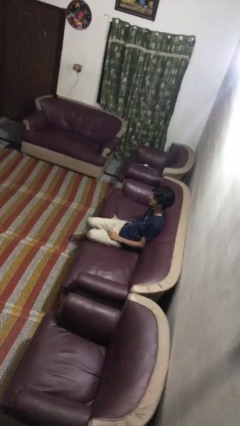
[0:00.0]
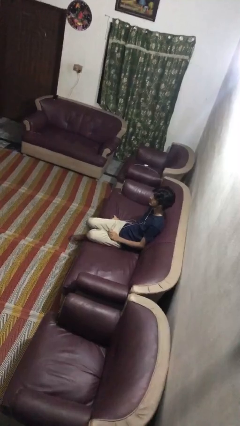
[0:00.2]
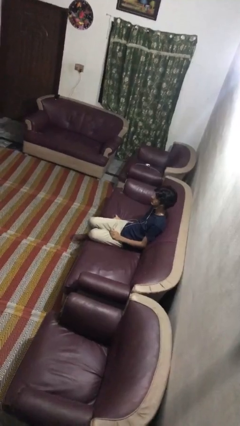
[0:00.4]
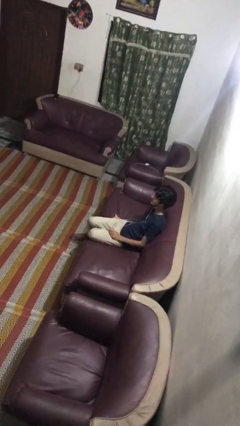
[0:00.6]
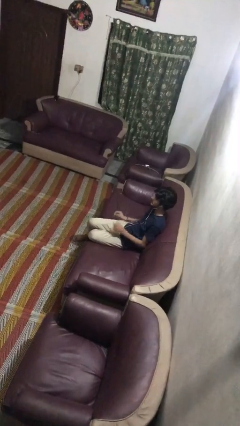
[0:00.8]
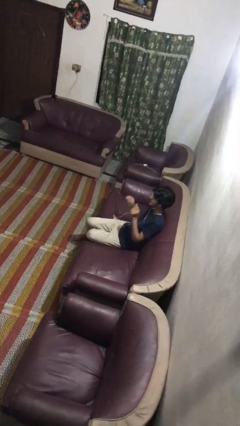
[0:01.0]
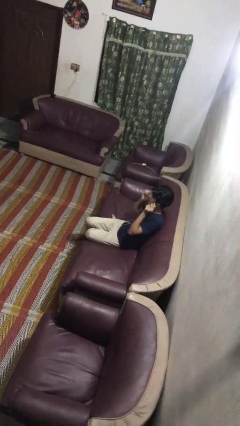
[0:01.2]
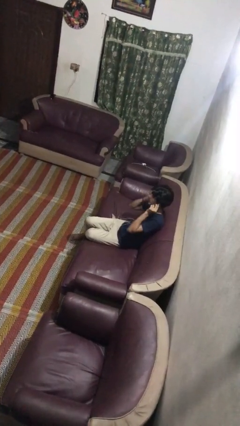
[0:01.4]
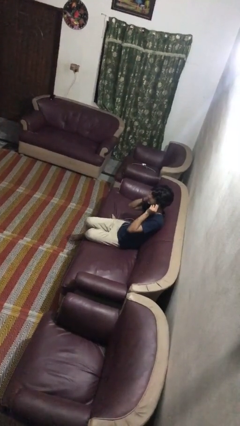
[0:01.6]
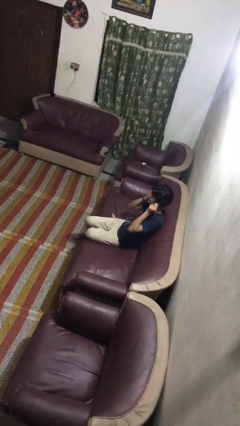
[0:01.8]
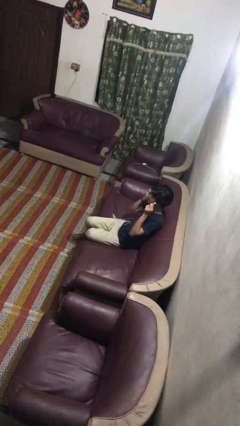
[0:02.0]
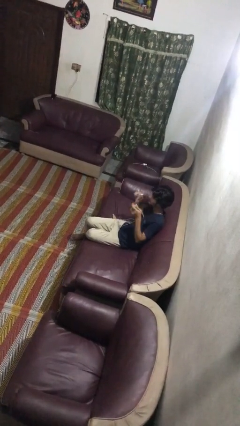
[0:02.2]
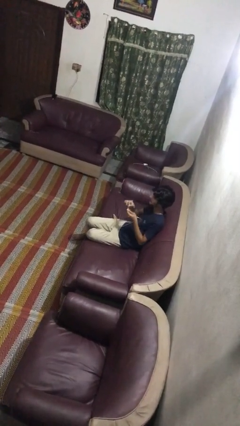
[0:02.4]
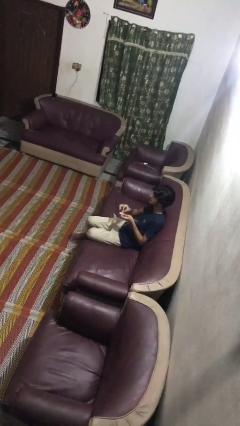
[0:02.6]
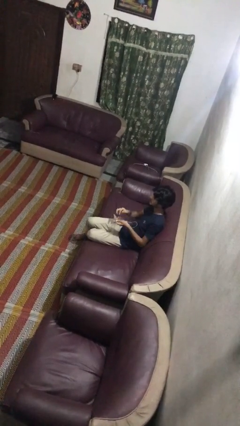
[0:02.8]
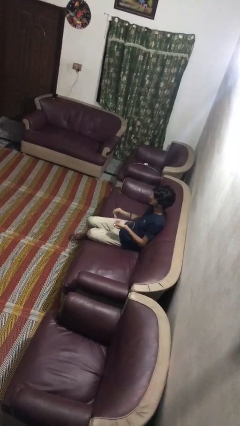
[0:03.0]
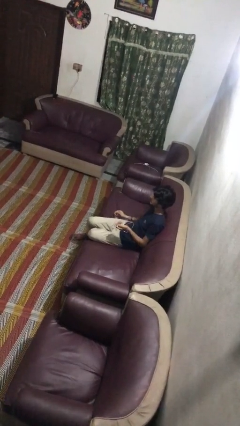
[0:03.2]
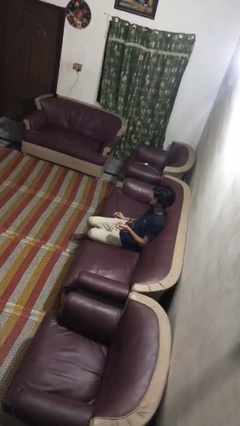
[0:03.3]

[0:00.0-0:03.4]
person takes off headphones

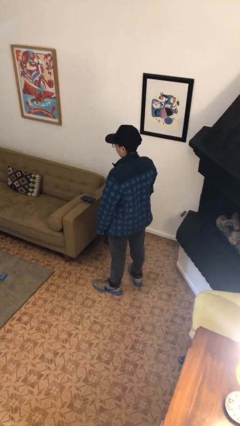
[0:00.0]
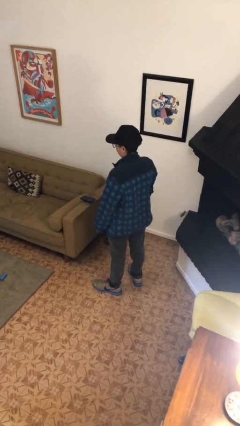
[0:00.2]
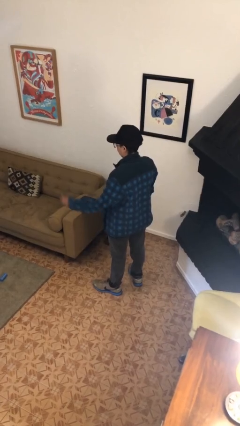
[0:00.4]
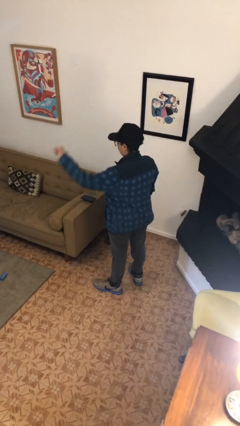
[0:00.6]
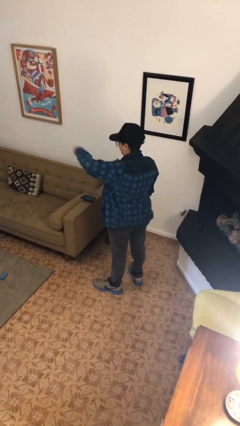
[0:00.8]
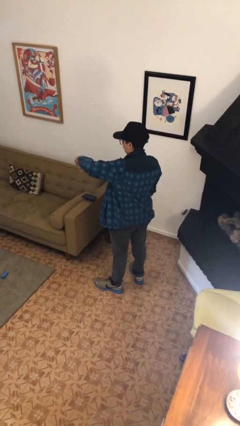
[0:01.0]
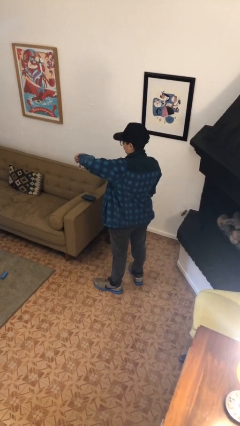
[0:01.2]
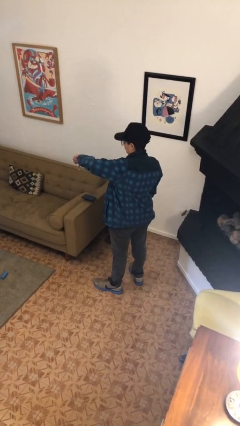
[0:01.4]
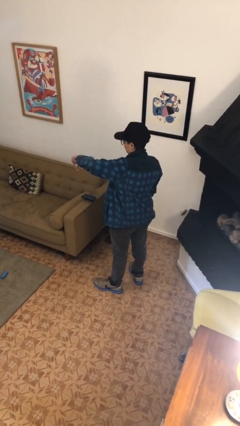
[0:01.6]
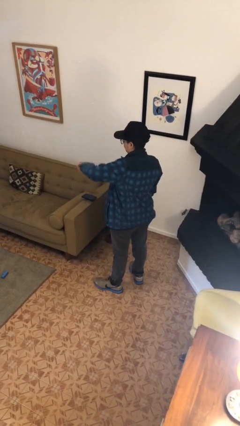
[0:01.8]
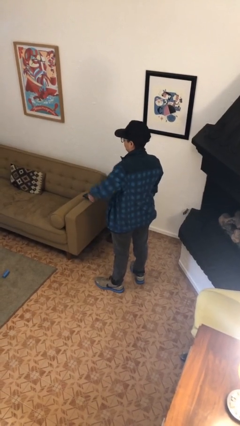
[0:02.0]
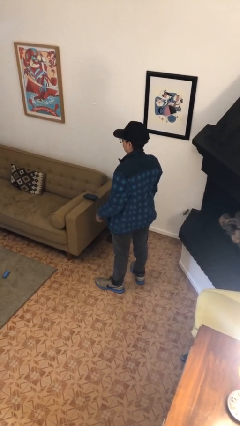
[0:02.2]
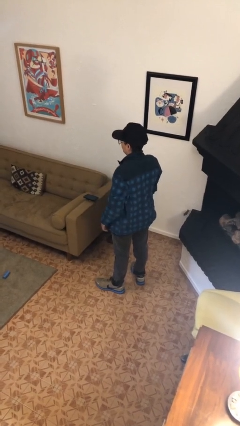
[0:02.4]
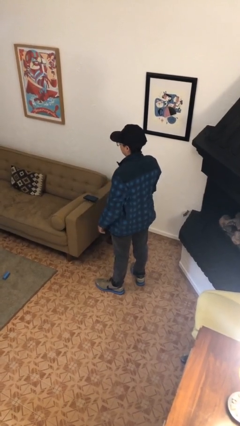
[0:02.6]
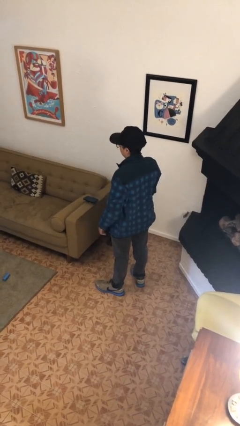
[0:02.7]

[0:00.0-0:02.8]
person gestures thumbs down

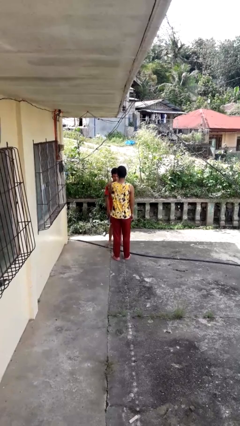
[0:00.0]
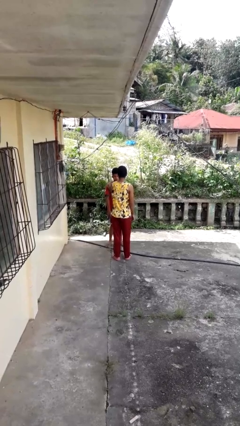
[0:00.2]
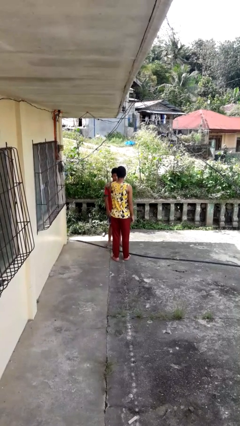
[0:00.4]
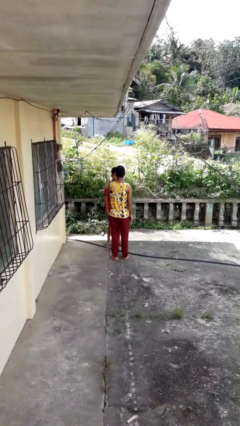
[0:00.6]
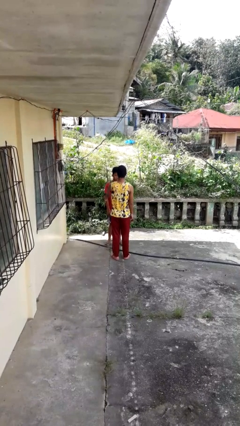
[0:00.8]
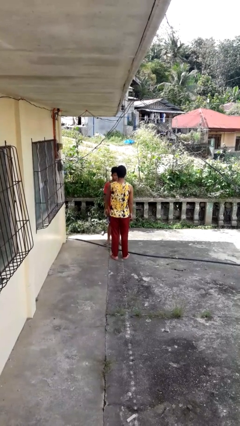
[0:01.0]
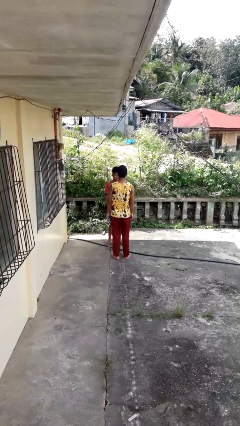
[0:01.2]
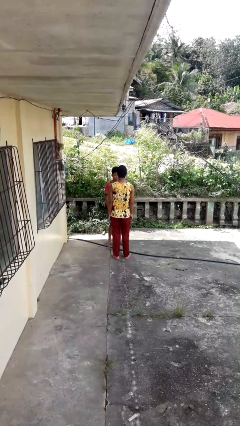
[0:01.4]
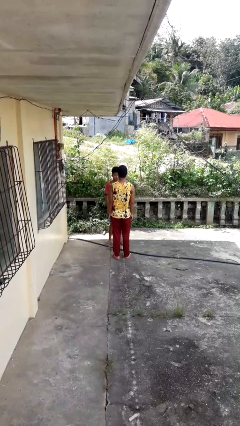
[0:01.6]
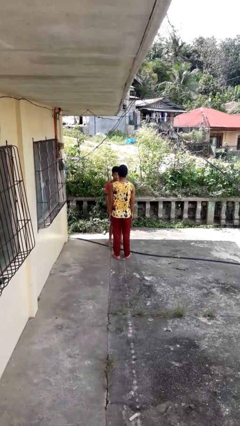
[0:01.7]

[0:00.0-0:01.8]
person shoves person

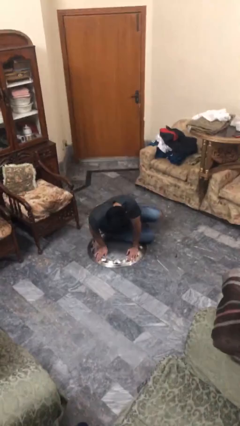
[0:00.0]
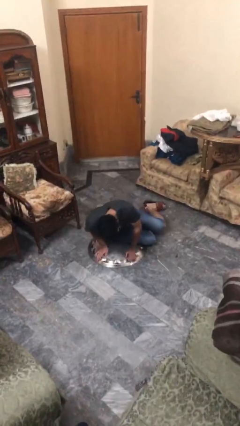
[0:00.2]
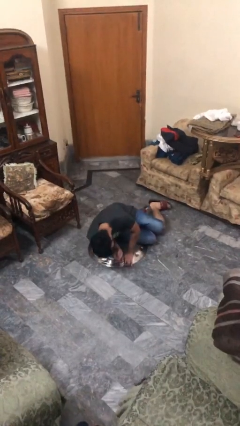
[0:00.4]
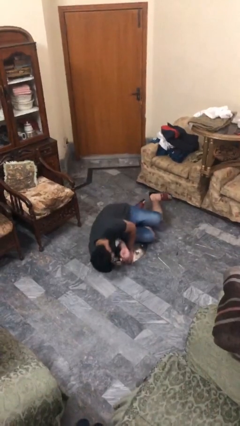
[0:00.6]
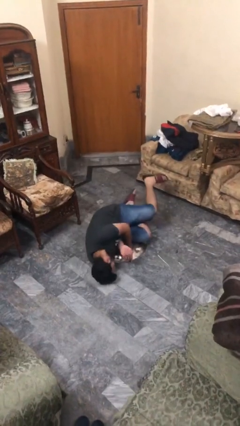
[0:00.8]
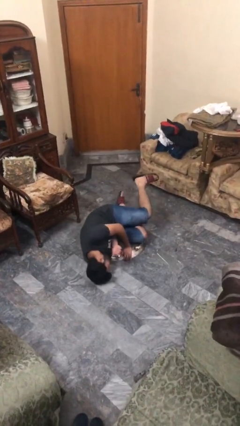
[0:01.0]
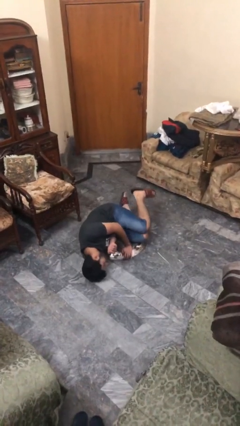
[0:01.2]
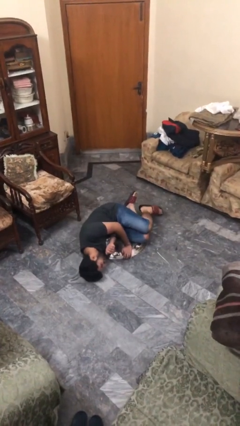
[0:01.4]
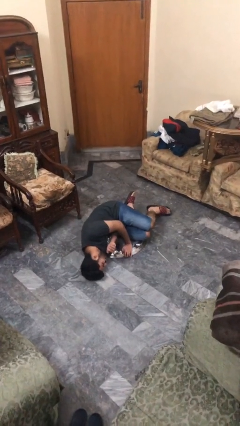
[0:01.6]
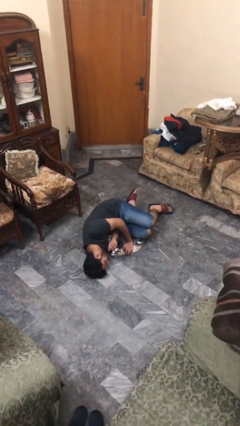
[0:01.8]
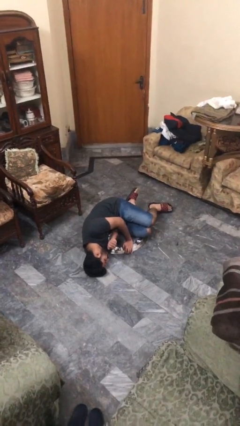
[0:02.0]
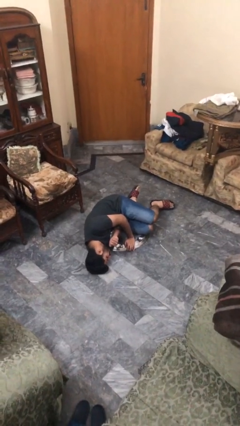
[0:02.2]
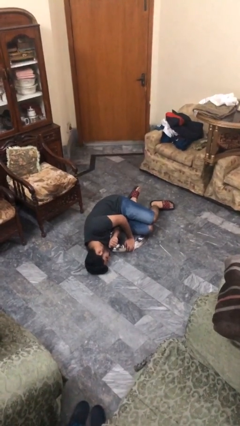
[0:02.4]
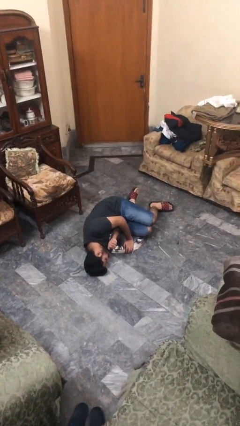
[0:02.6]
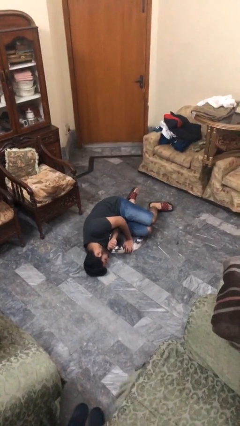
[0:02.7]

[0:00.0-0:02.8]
person lies down on floor

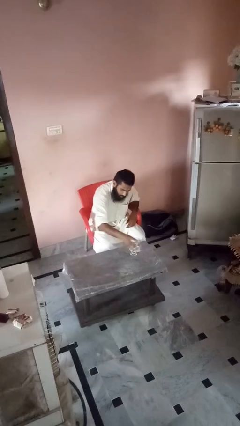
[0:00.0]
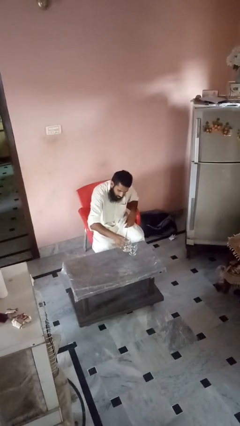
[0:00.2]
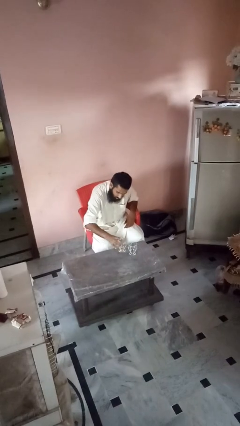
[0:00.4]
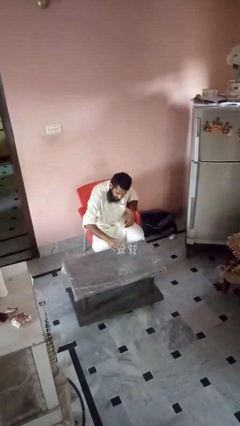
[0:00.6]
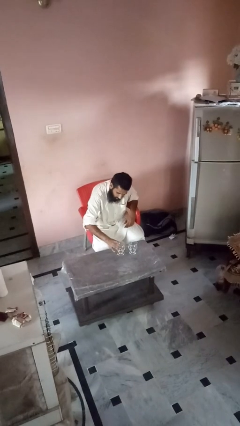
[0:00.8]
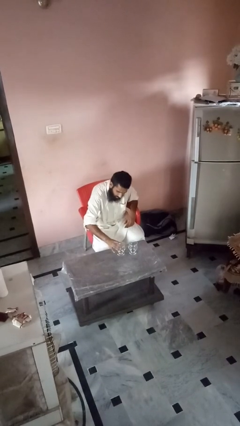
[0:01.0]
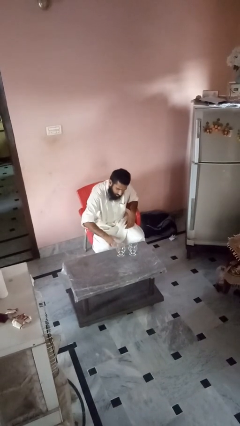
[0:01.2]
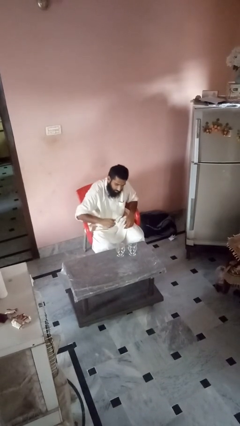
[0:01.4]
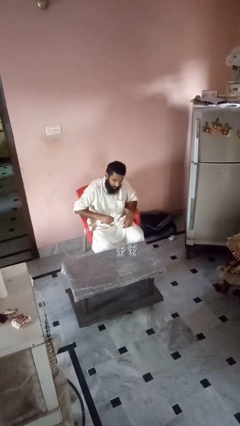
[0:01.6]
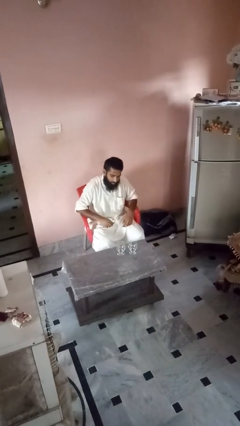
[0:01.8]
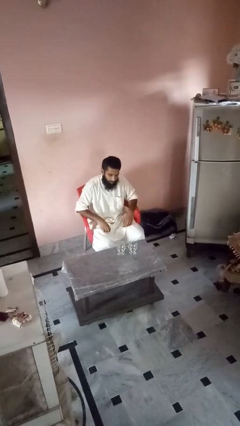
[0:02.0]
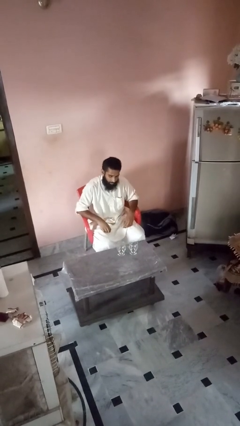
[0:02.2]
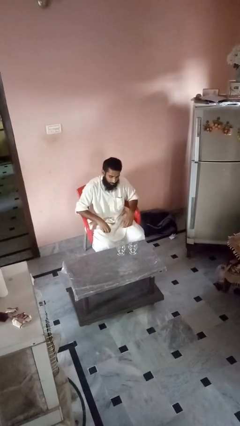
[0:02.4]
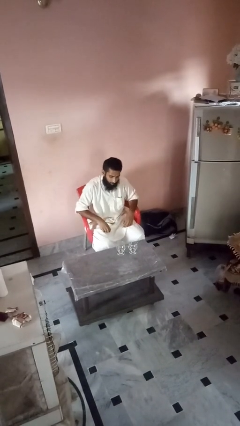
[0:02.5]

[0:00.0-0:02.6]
person sets upright glass

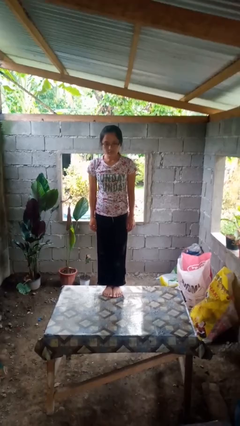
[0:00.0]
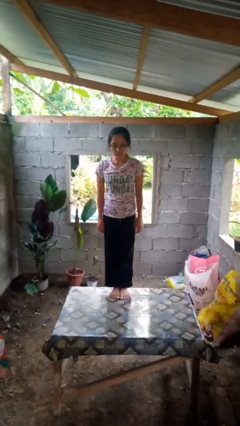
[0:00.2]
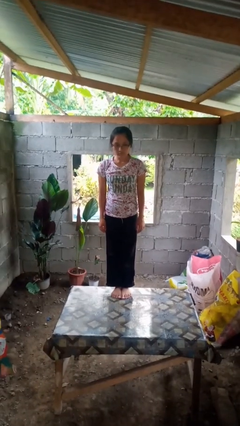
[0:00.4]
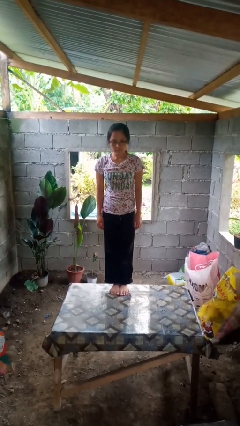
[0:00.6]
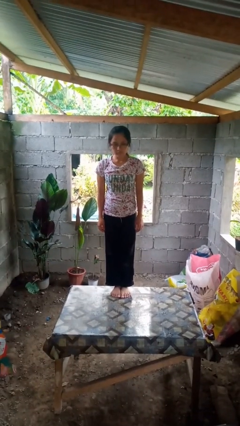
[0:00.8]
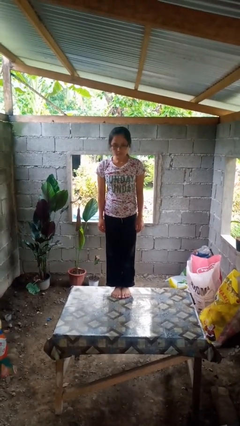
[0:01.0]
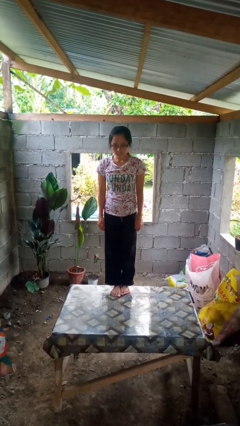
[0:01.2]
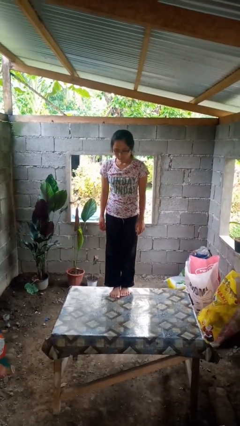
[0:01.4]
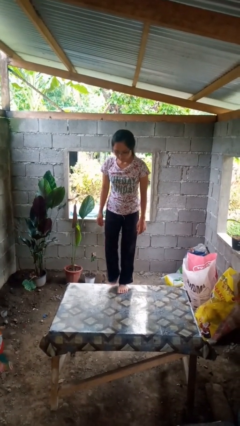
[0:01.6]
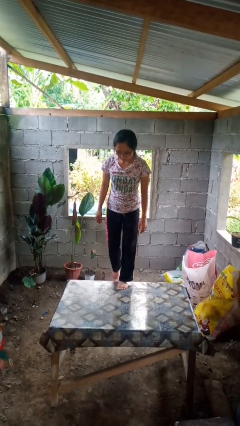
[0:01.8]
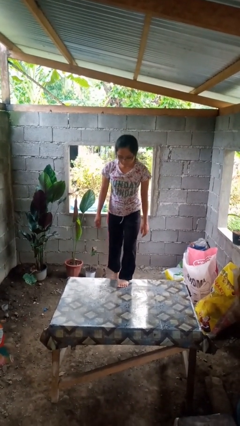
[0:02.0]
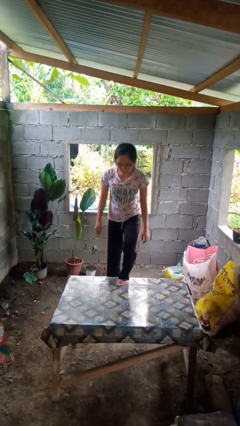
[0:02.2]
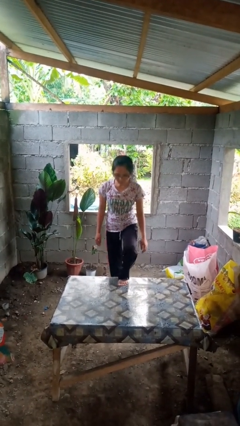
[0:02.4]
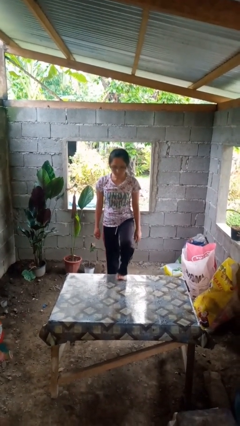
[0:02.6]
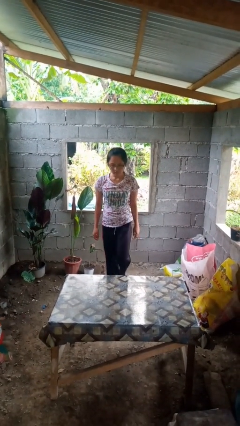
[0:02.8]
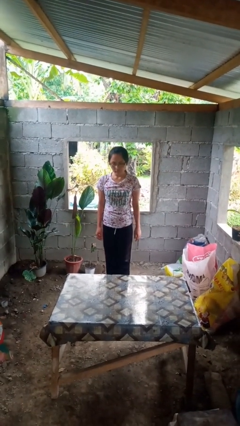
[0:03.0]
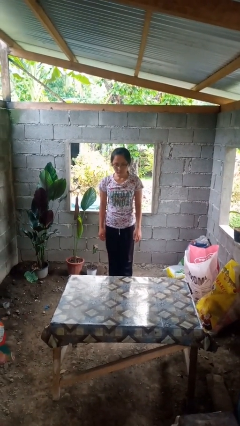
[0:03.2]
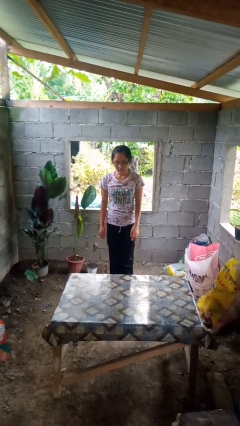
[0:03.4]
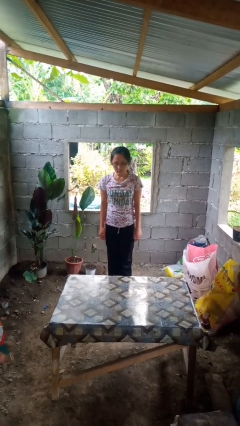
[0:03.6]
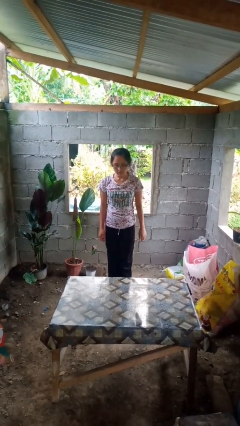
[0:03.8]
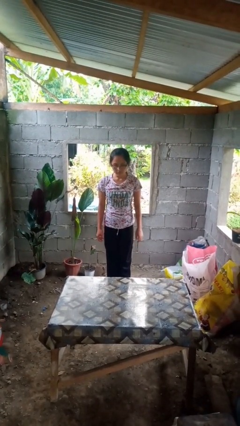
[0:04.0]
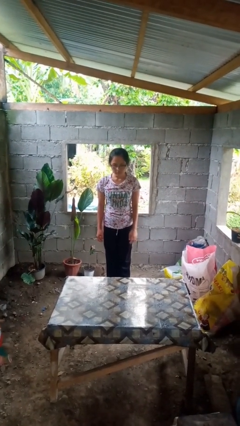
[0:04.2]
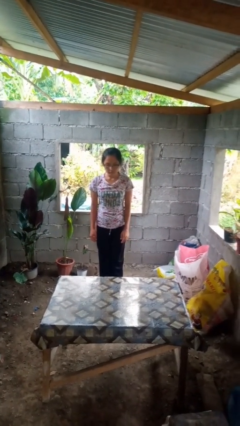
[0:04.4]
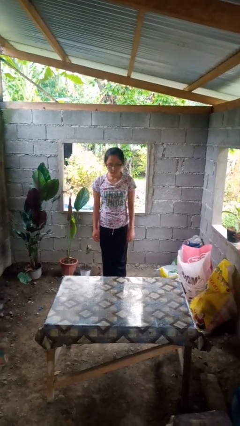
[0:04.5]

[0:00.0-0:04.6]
person climbs off table
